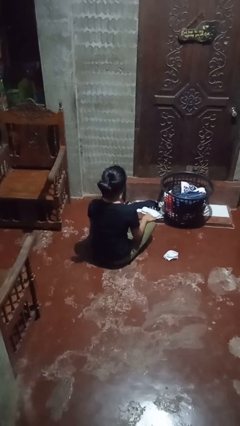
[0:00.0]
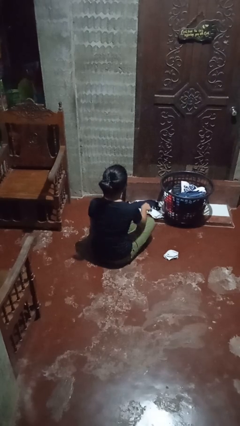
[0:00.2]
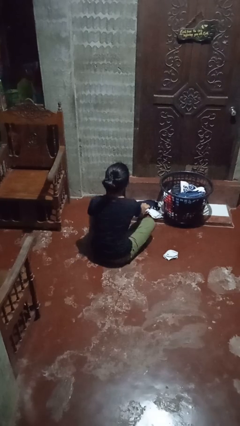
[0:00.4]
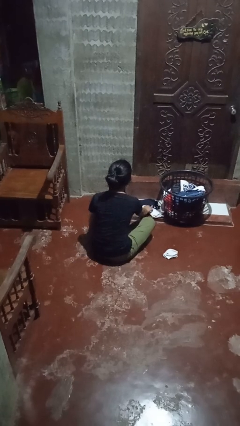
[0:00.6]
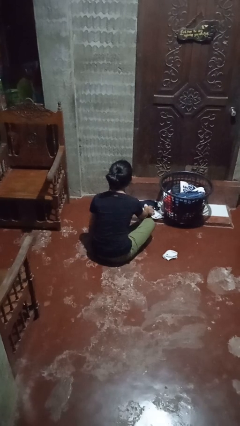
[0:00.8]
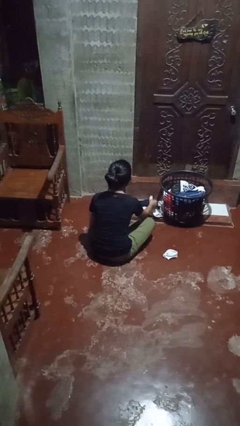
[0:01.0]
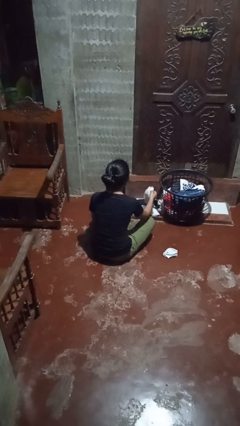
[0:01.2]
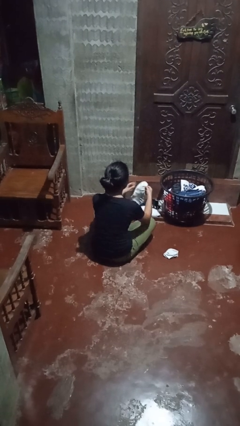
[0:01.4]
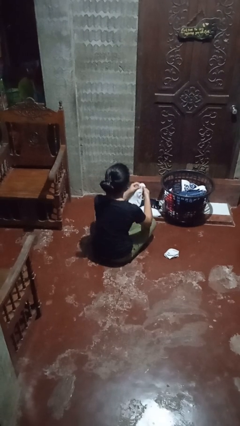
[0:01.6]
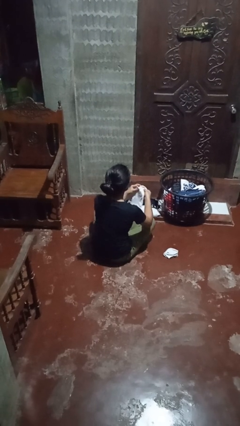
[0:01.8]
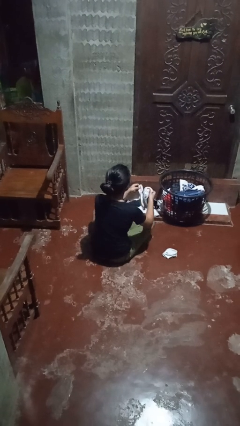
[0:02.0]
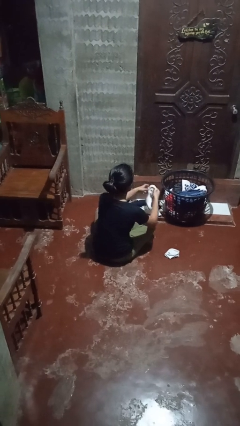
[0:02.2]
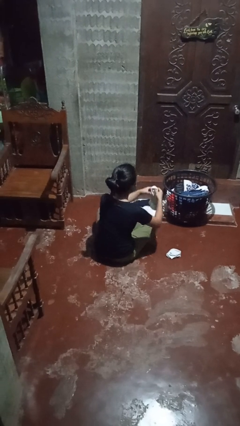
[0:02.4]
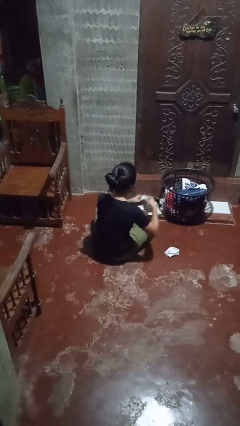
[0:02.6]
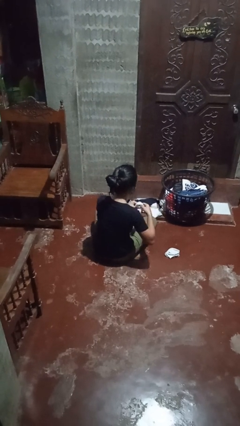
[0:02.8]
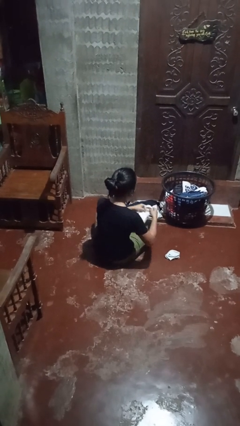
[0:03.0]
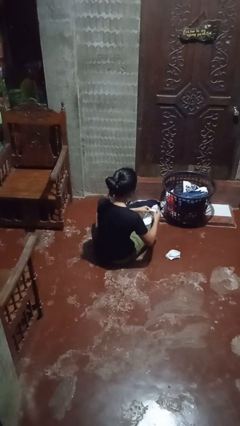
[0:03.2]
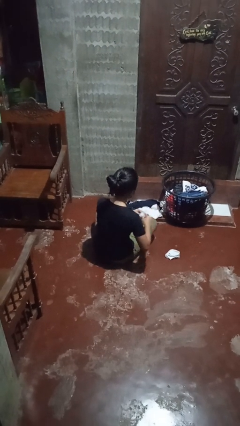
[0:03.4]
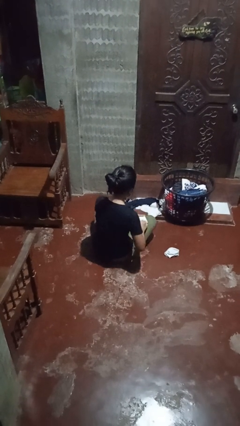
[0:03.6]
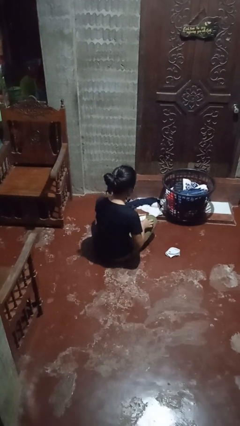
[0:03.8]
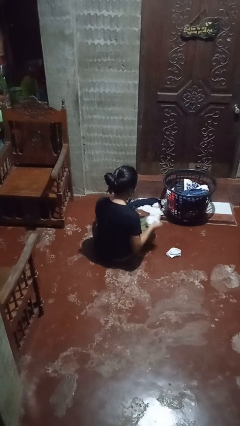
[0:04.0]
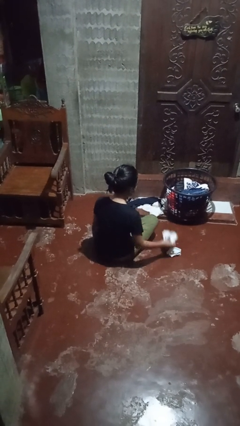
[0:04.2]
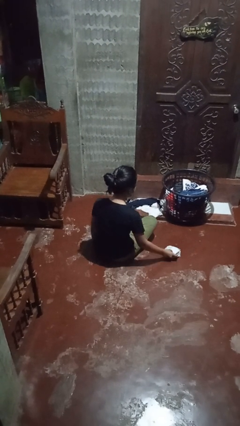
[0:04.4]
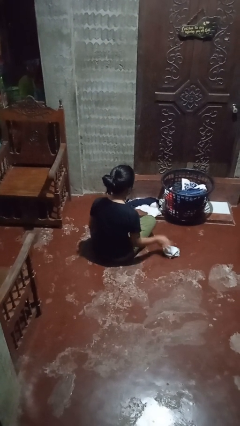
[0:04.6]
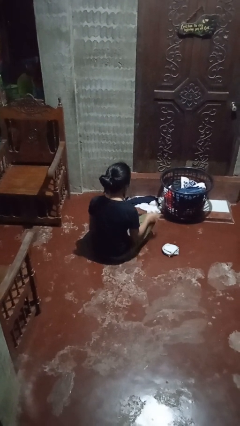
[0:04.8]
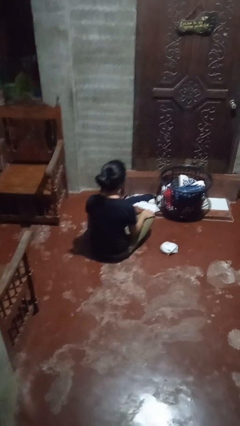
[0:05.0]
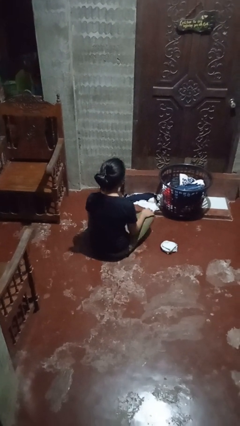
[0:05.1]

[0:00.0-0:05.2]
person folds socks

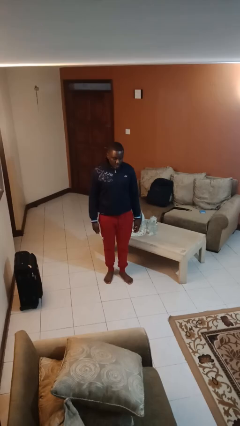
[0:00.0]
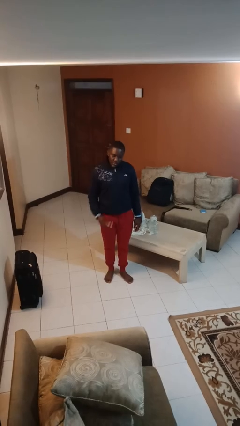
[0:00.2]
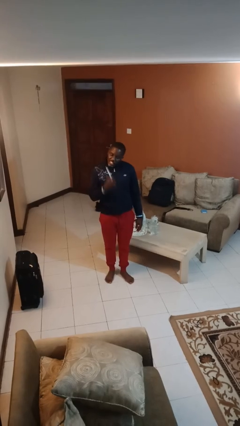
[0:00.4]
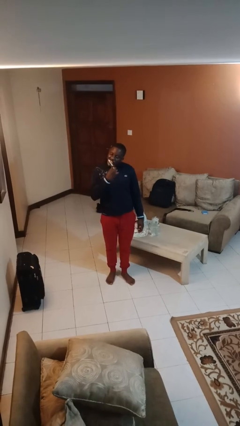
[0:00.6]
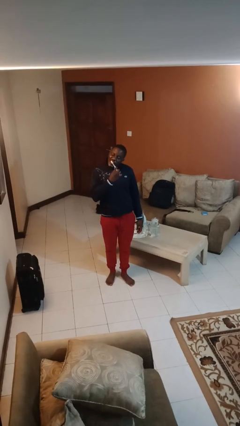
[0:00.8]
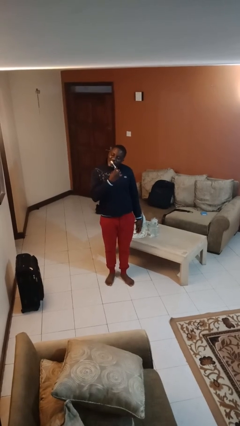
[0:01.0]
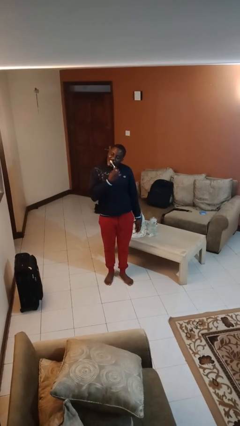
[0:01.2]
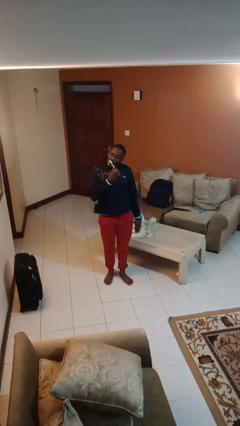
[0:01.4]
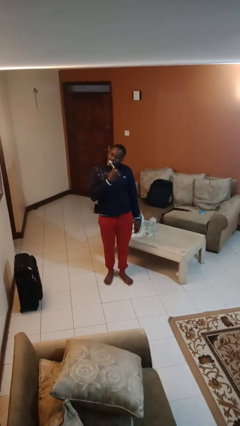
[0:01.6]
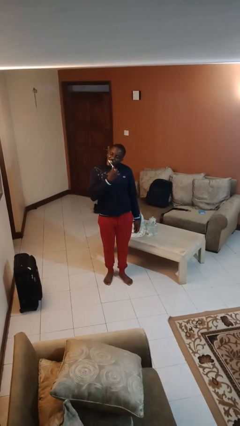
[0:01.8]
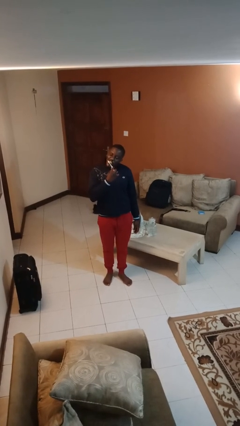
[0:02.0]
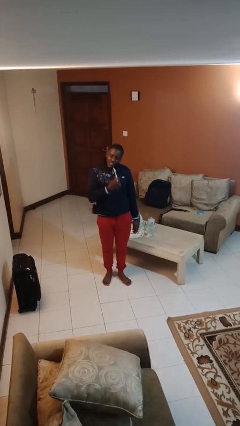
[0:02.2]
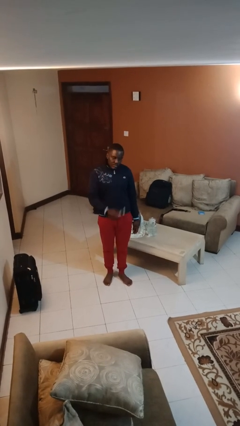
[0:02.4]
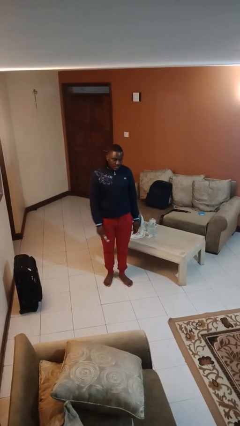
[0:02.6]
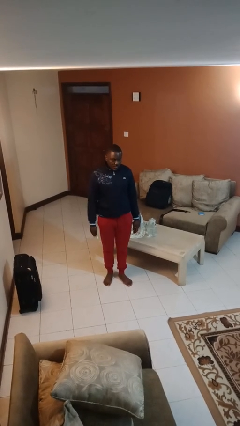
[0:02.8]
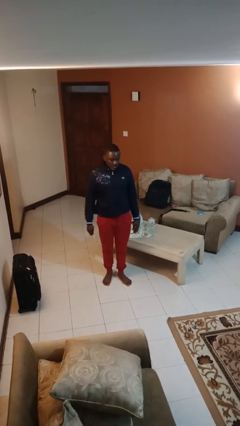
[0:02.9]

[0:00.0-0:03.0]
person brushes teeth

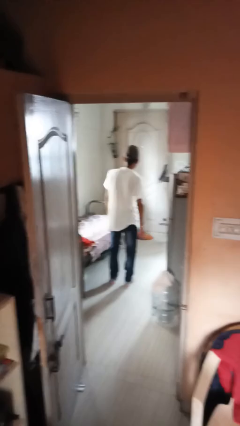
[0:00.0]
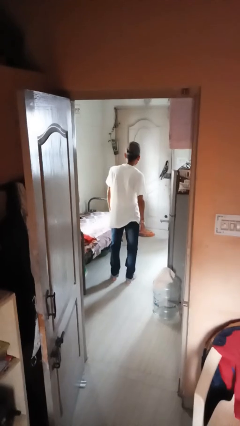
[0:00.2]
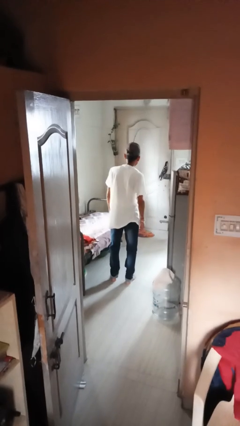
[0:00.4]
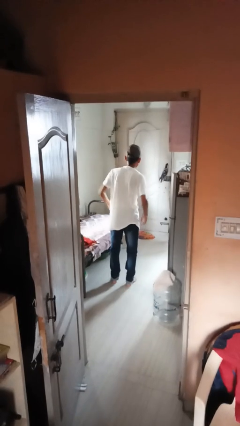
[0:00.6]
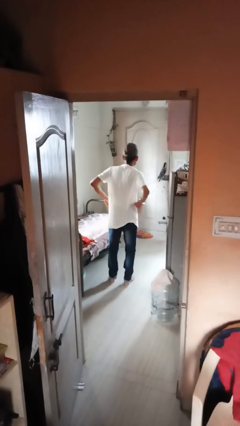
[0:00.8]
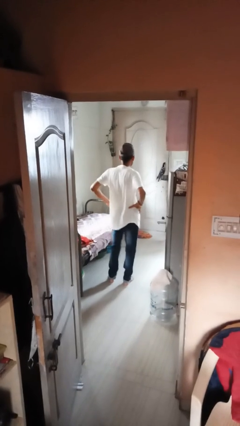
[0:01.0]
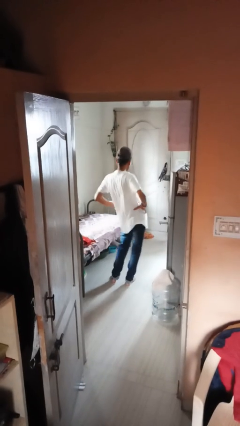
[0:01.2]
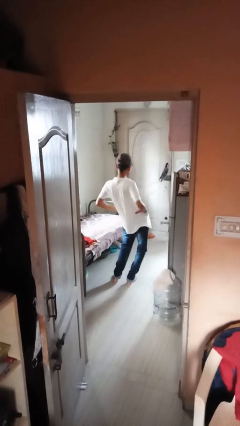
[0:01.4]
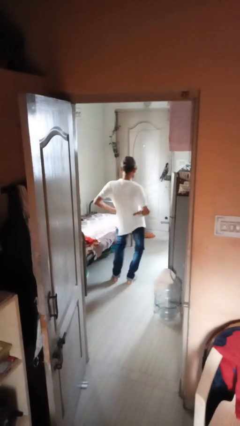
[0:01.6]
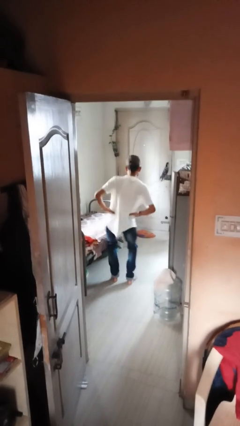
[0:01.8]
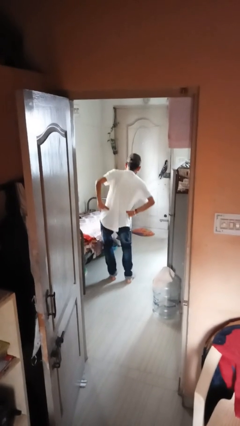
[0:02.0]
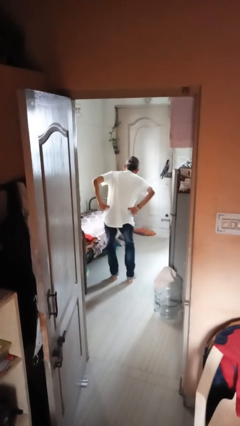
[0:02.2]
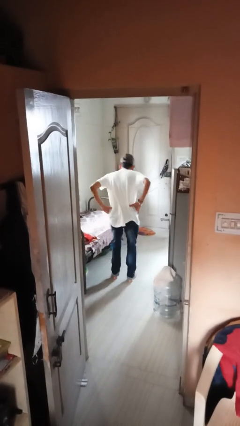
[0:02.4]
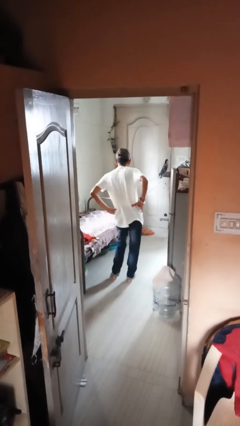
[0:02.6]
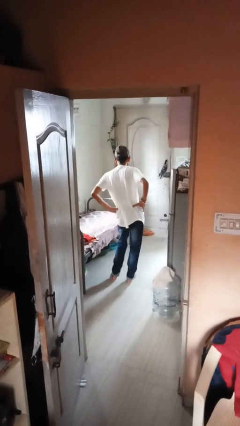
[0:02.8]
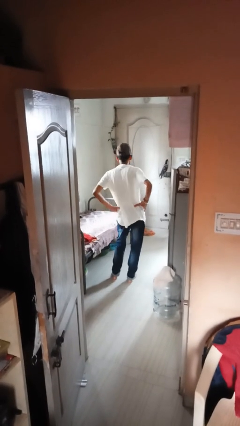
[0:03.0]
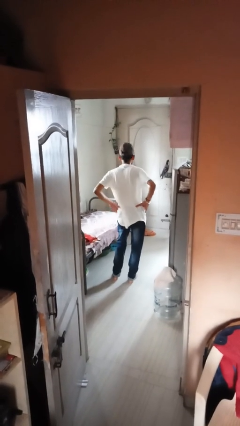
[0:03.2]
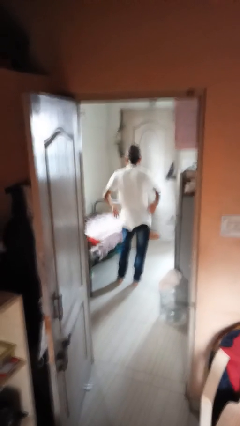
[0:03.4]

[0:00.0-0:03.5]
person wiggles hips

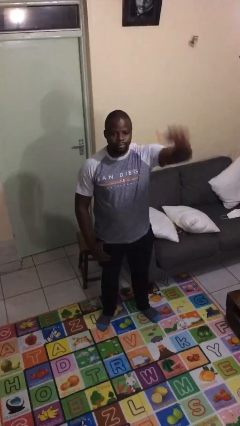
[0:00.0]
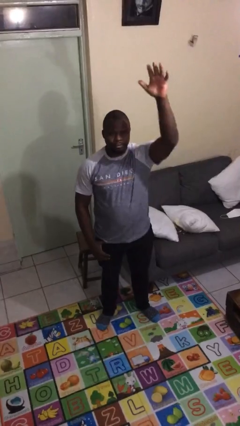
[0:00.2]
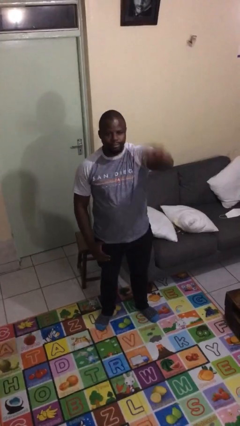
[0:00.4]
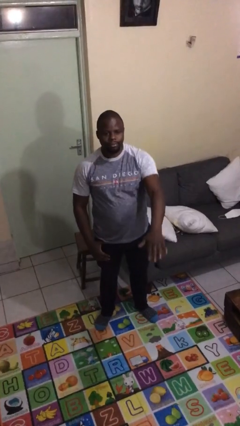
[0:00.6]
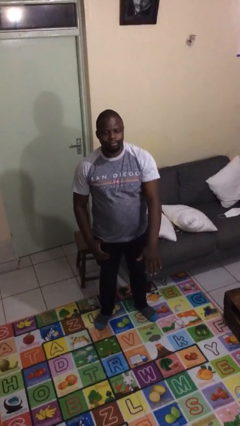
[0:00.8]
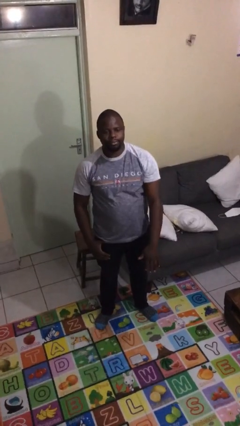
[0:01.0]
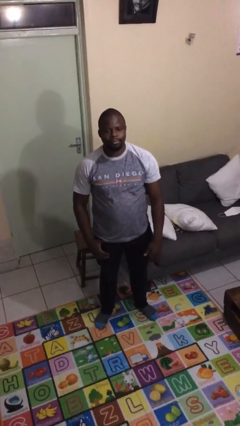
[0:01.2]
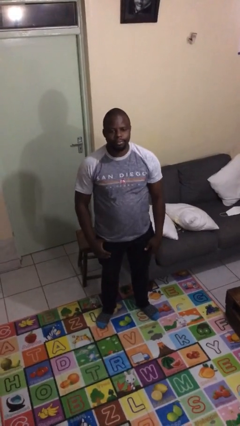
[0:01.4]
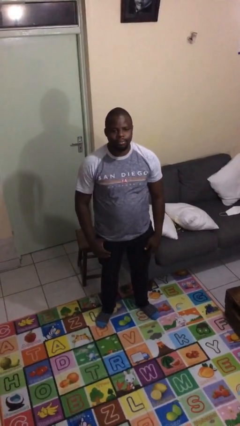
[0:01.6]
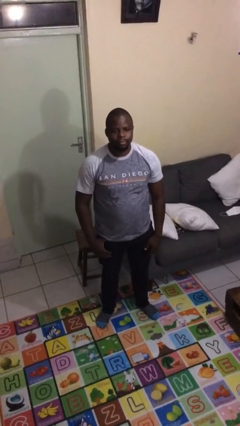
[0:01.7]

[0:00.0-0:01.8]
person gestures swipe down

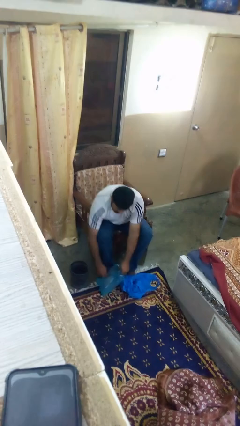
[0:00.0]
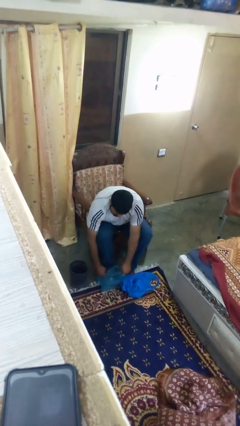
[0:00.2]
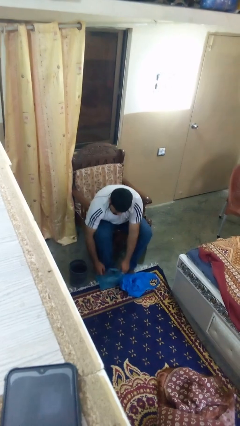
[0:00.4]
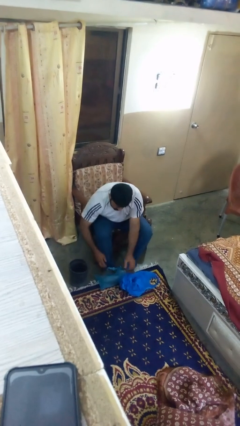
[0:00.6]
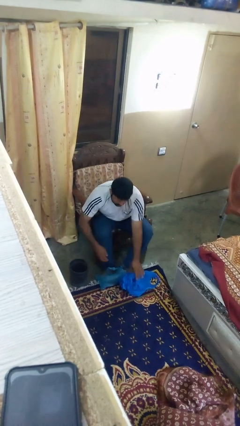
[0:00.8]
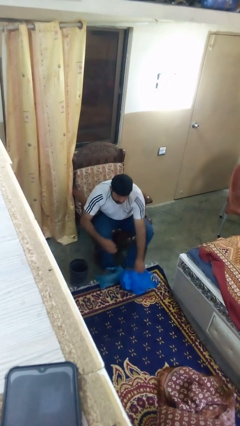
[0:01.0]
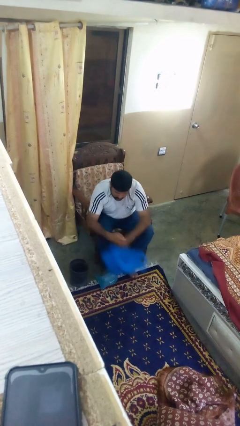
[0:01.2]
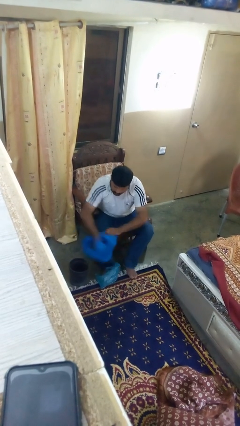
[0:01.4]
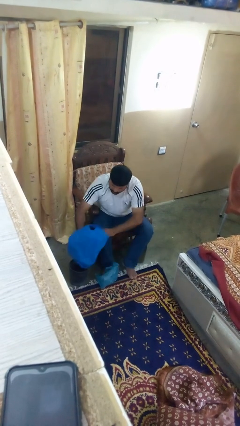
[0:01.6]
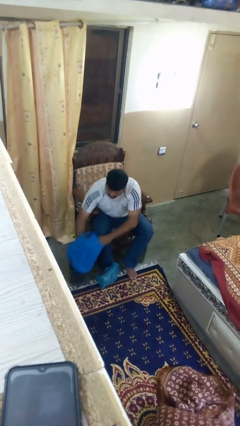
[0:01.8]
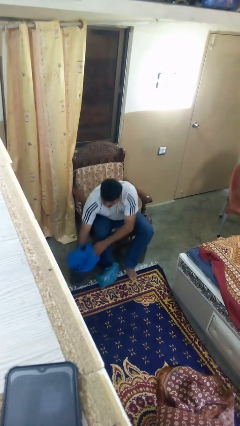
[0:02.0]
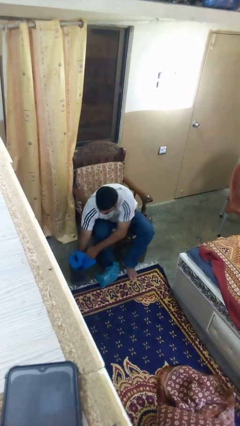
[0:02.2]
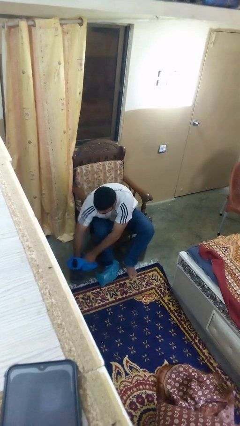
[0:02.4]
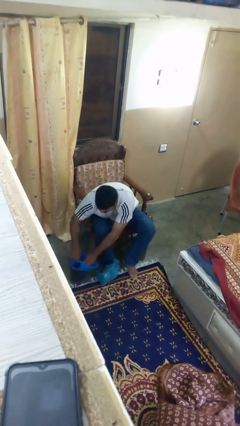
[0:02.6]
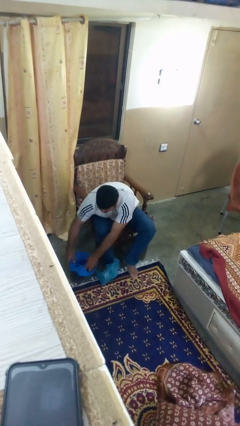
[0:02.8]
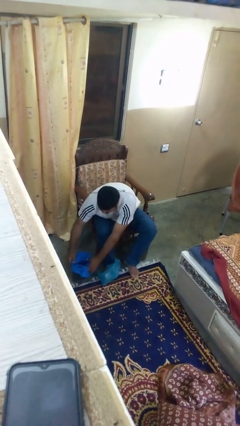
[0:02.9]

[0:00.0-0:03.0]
person inserts trashbag into trashcan

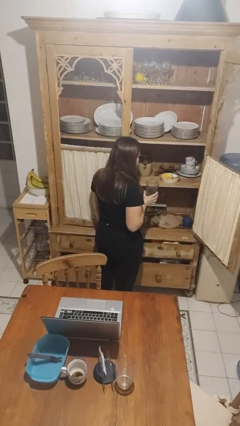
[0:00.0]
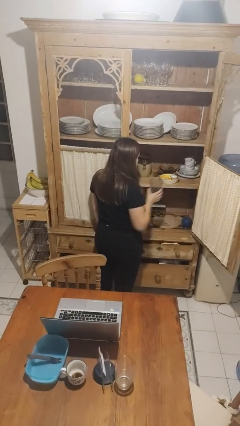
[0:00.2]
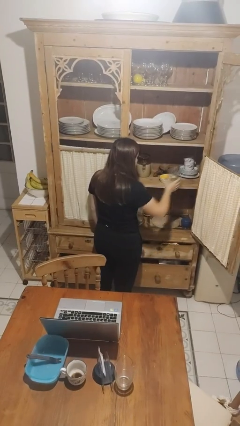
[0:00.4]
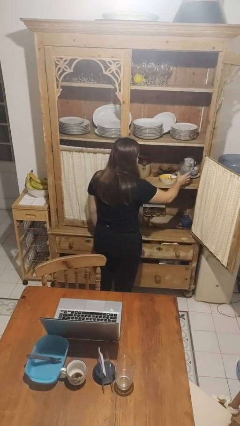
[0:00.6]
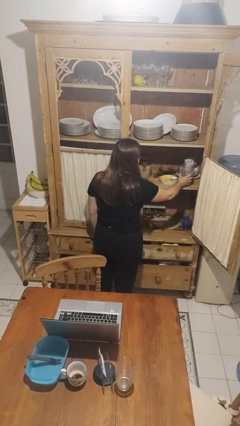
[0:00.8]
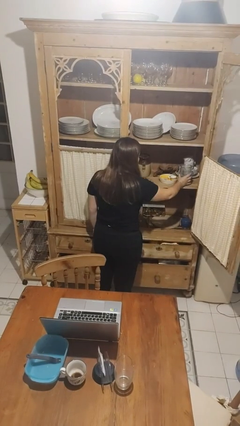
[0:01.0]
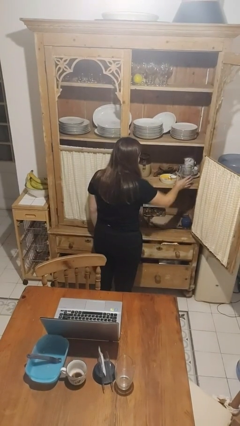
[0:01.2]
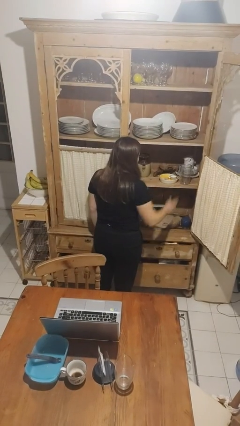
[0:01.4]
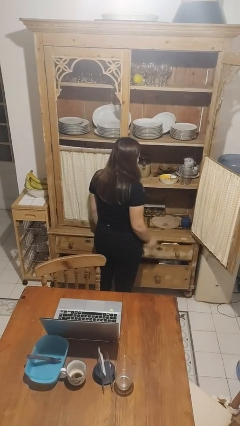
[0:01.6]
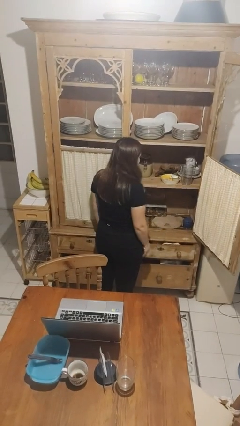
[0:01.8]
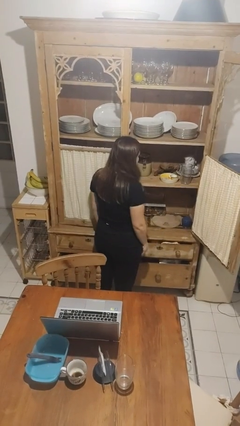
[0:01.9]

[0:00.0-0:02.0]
person puts object in cabinet
